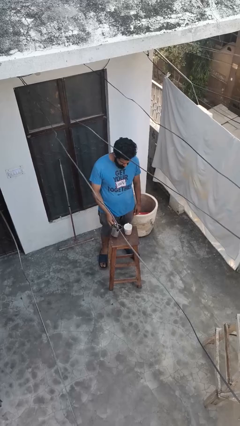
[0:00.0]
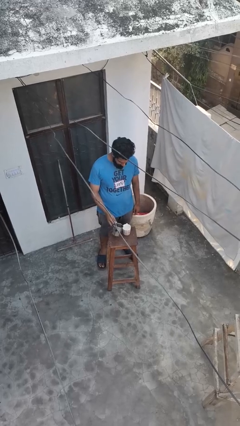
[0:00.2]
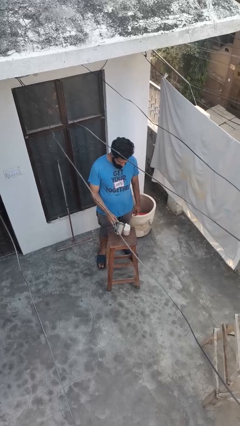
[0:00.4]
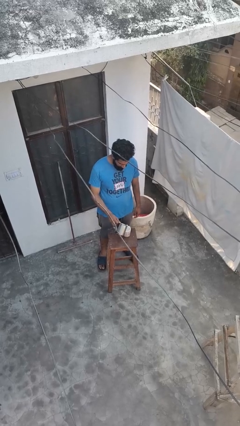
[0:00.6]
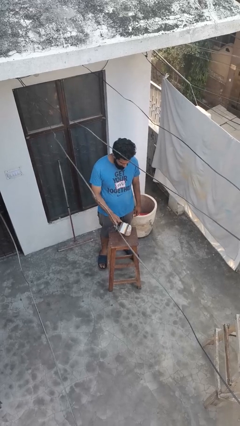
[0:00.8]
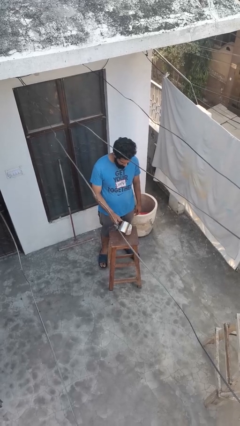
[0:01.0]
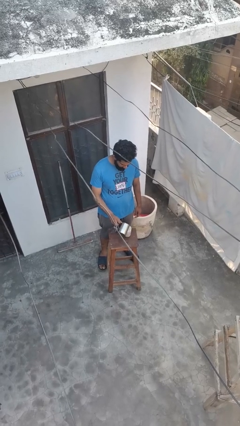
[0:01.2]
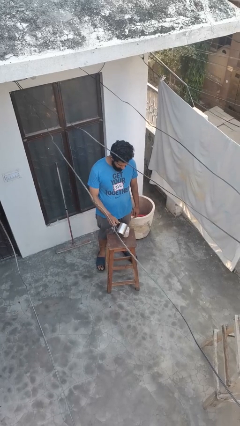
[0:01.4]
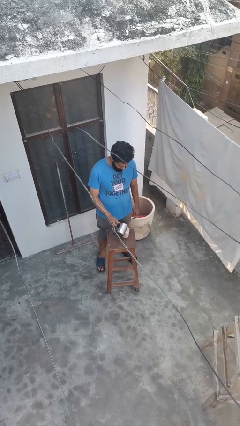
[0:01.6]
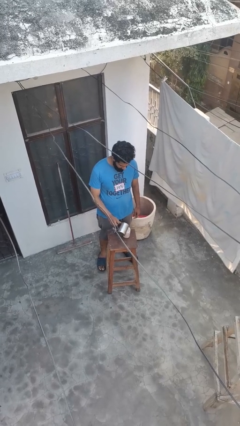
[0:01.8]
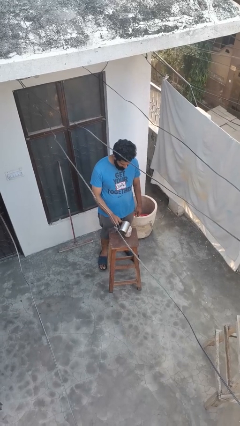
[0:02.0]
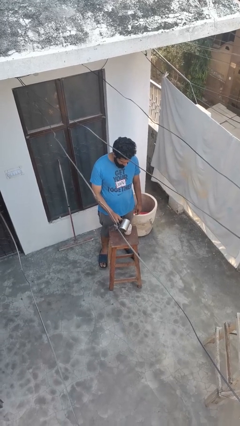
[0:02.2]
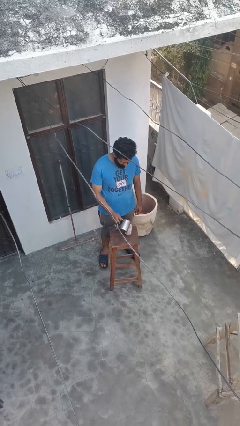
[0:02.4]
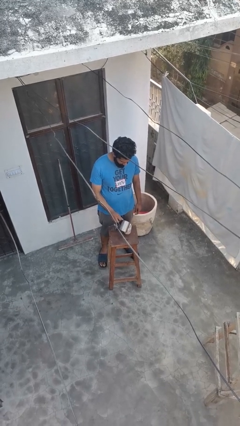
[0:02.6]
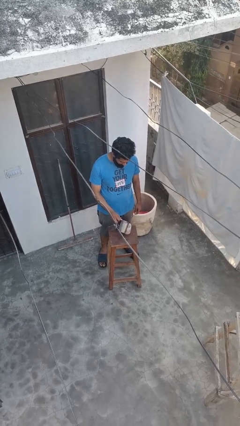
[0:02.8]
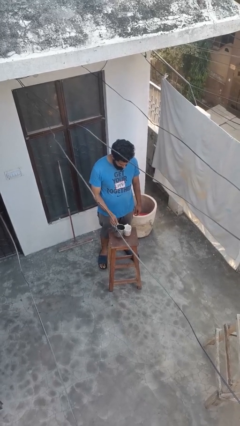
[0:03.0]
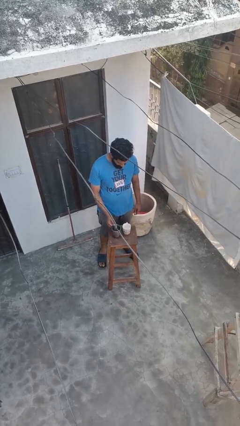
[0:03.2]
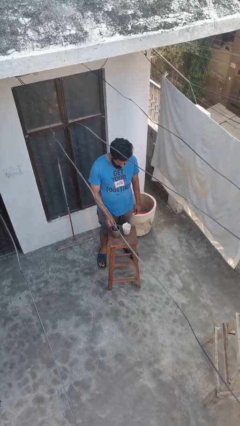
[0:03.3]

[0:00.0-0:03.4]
person pours coffee into mug

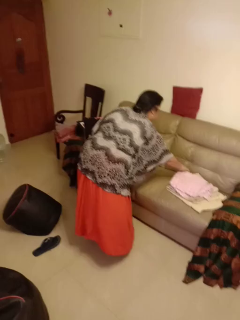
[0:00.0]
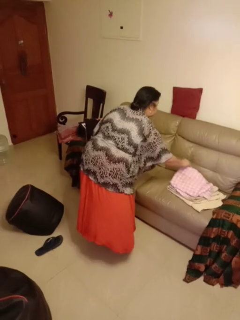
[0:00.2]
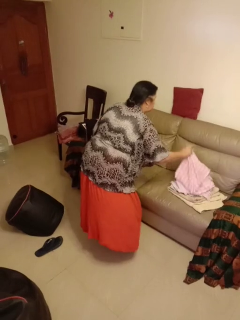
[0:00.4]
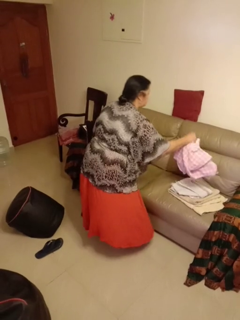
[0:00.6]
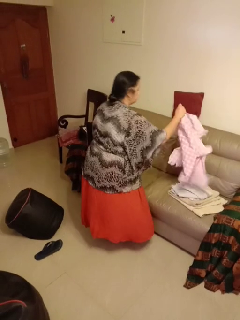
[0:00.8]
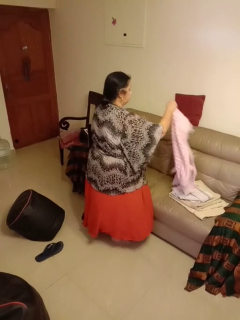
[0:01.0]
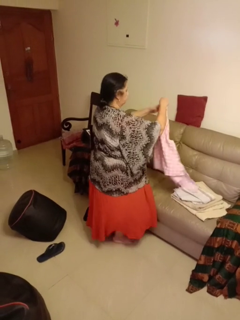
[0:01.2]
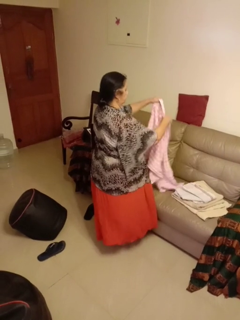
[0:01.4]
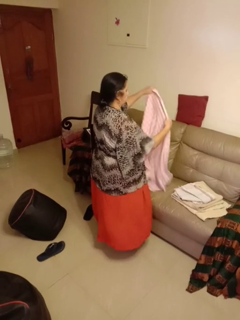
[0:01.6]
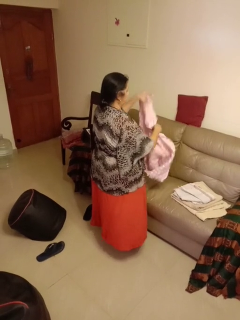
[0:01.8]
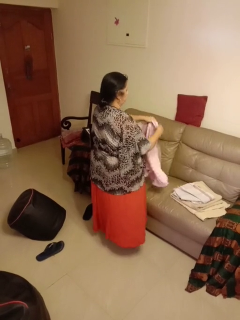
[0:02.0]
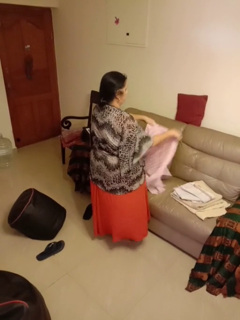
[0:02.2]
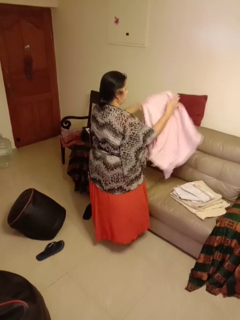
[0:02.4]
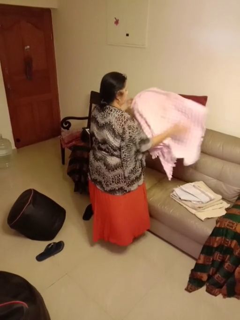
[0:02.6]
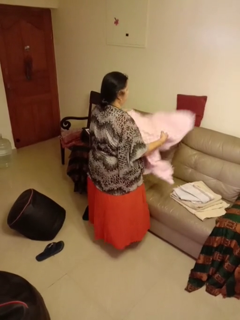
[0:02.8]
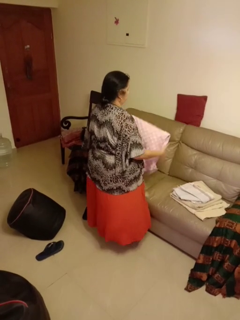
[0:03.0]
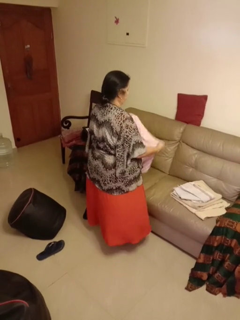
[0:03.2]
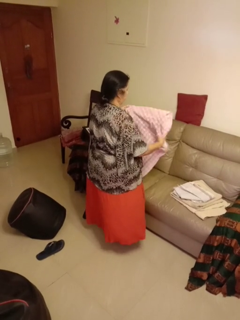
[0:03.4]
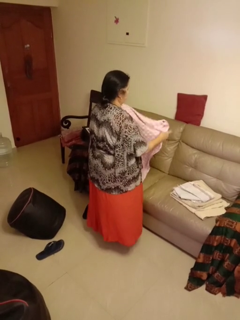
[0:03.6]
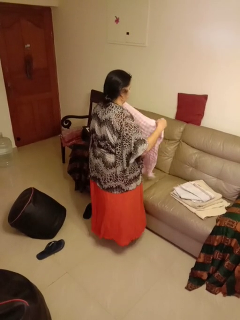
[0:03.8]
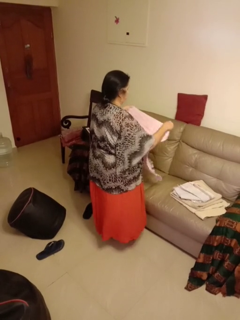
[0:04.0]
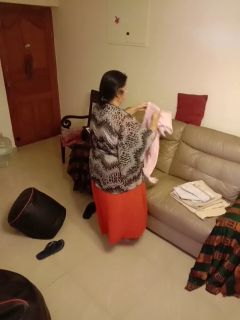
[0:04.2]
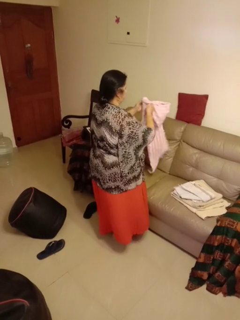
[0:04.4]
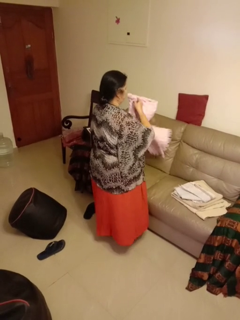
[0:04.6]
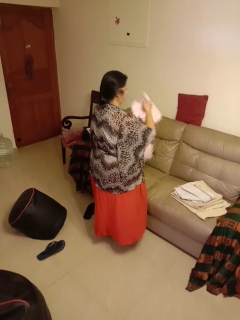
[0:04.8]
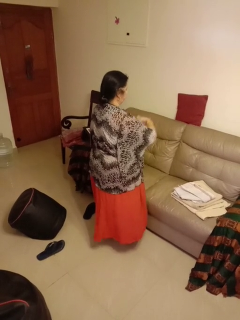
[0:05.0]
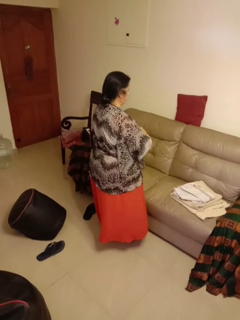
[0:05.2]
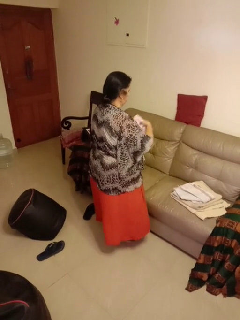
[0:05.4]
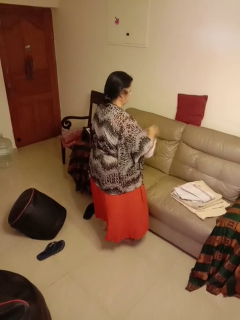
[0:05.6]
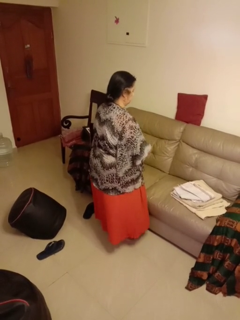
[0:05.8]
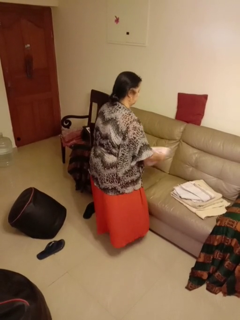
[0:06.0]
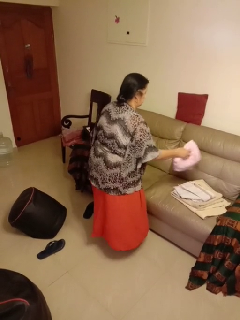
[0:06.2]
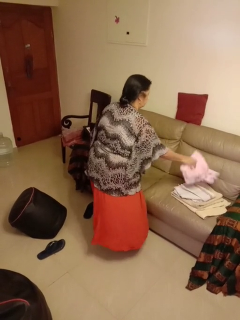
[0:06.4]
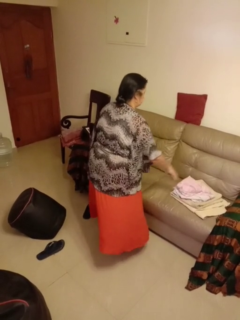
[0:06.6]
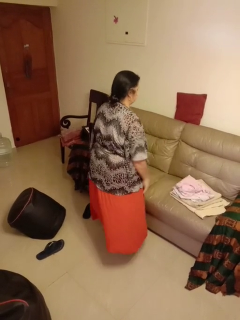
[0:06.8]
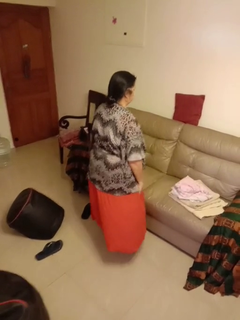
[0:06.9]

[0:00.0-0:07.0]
person folds towel

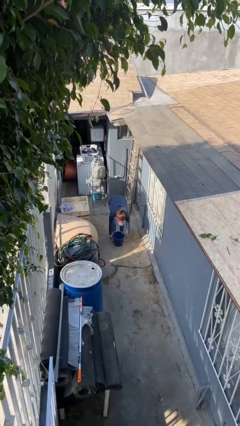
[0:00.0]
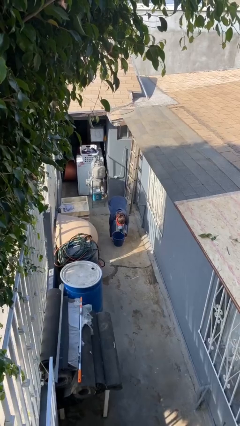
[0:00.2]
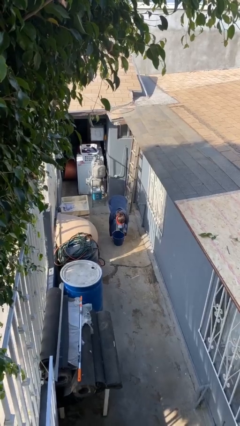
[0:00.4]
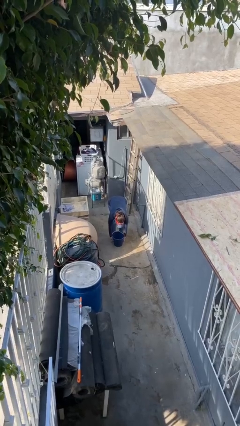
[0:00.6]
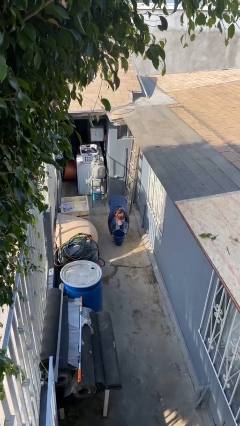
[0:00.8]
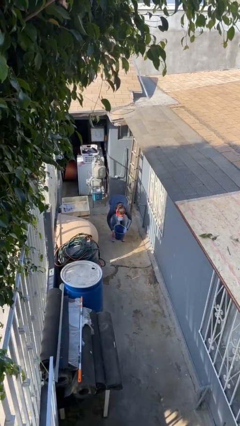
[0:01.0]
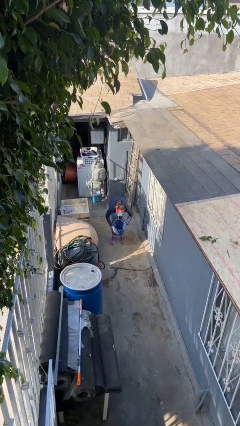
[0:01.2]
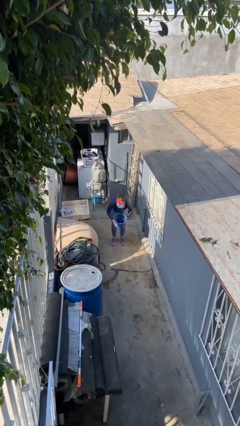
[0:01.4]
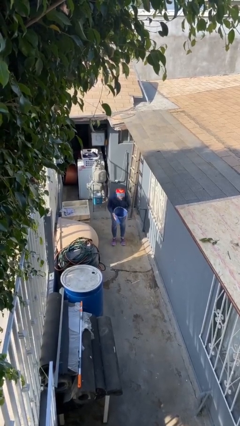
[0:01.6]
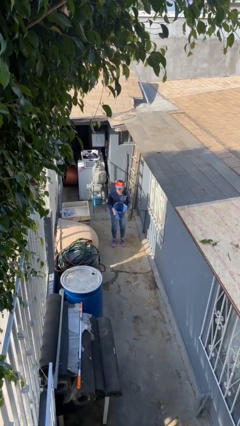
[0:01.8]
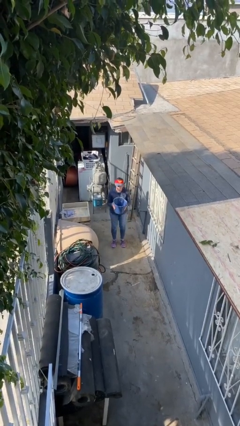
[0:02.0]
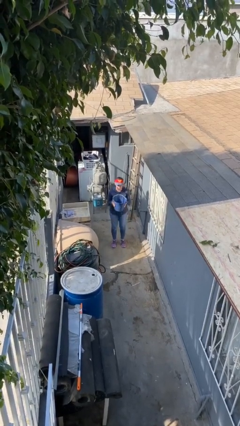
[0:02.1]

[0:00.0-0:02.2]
person picks up object from floor

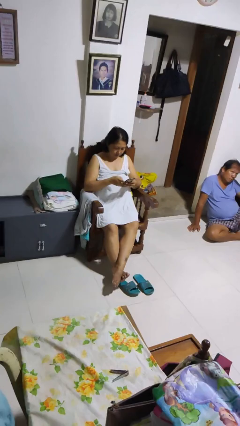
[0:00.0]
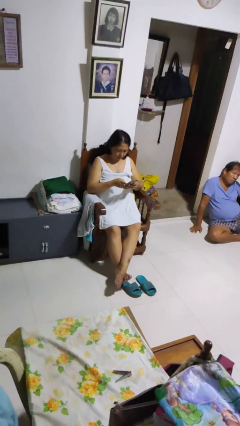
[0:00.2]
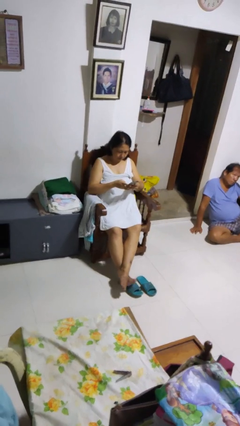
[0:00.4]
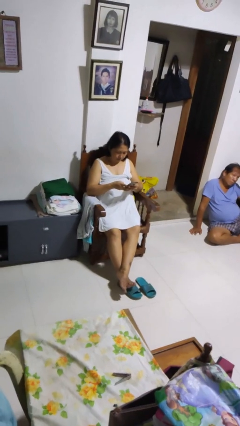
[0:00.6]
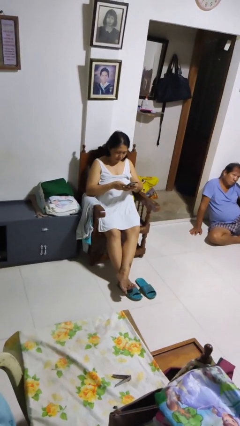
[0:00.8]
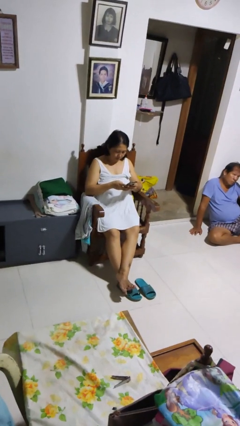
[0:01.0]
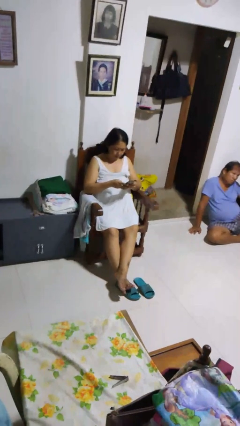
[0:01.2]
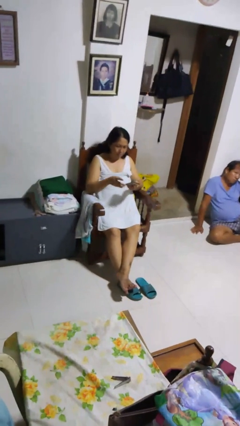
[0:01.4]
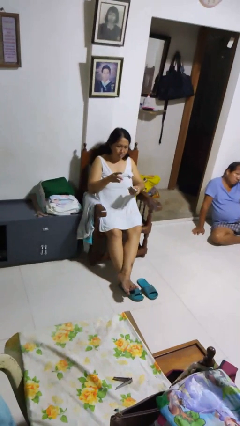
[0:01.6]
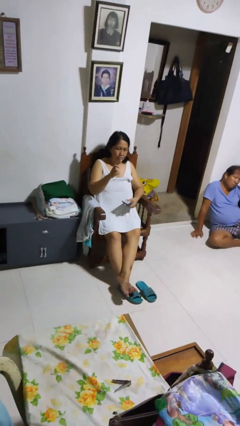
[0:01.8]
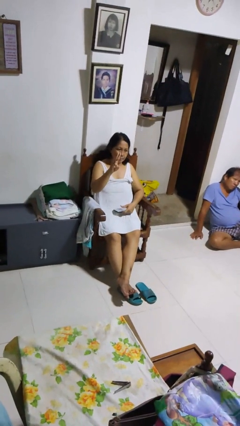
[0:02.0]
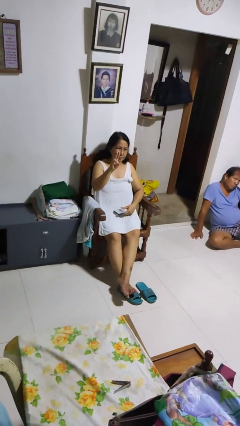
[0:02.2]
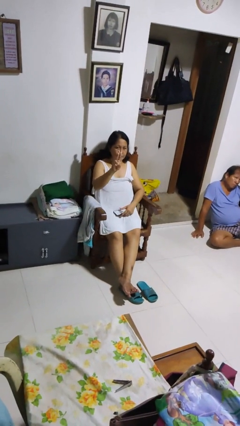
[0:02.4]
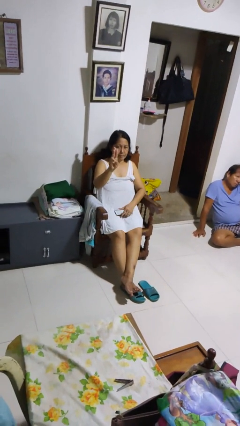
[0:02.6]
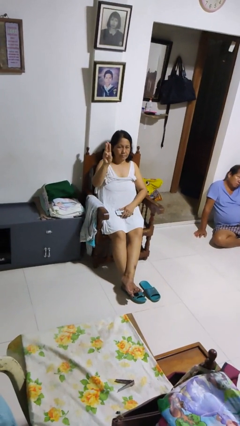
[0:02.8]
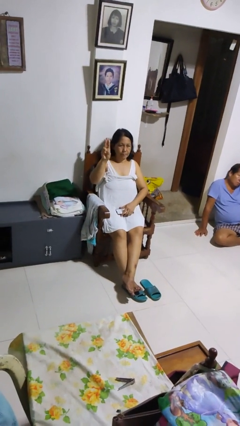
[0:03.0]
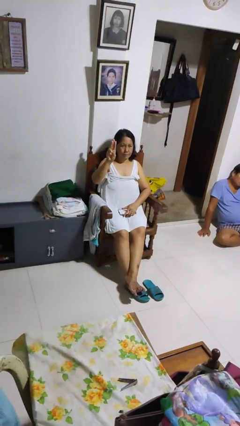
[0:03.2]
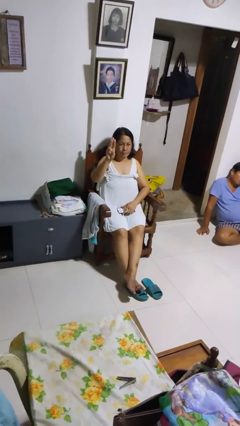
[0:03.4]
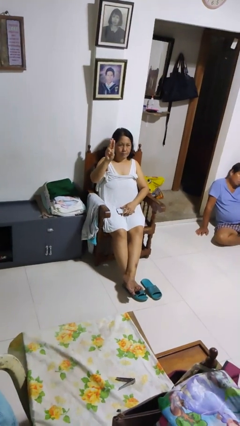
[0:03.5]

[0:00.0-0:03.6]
person gestures number three

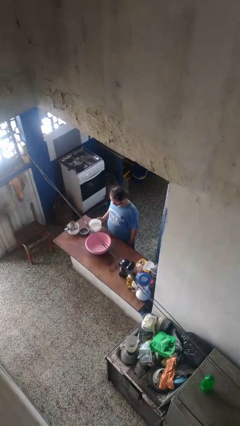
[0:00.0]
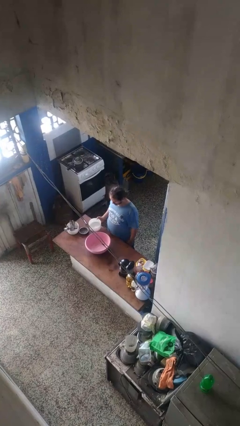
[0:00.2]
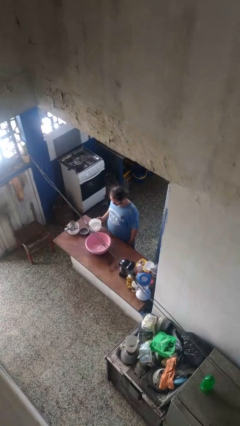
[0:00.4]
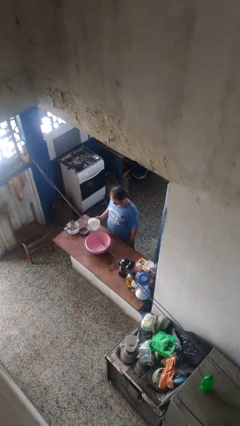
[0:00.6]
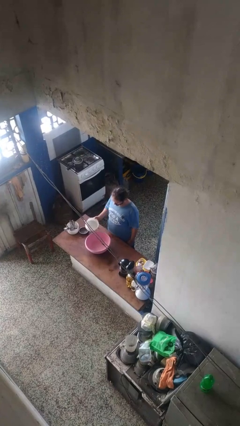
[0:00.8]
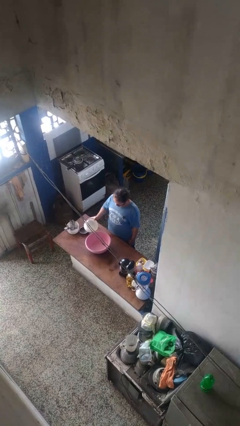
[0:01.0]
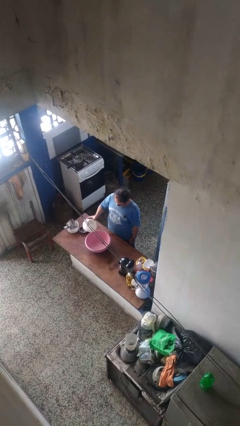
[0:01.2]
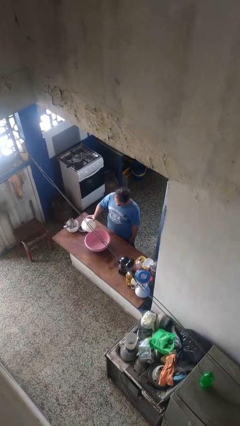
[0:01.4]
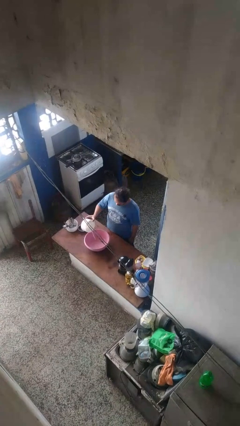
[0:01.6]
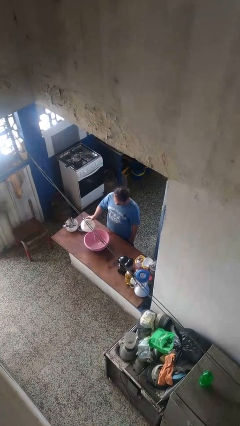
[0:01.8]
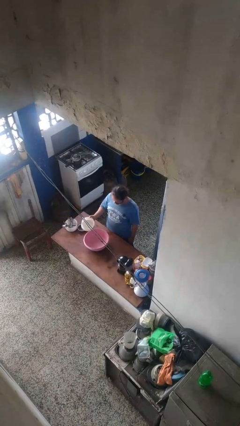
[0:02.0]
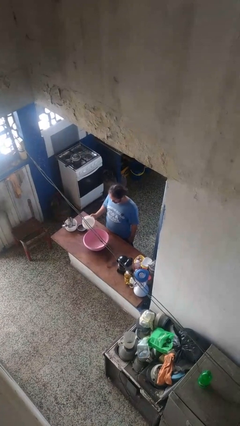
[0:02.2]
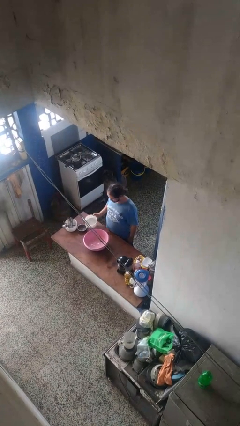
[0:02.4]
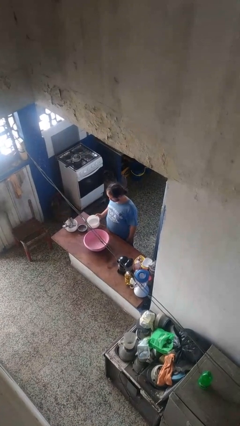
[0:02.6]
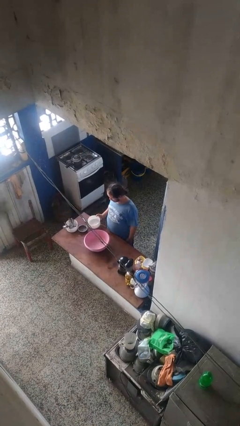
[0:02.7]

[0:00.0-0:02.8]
person pours into bowl
